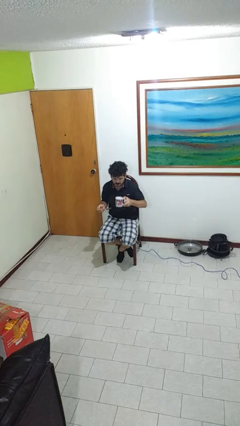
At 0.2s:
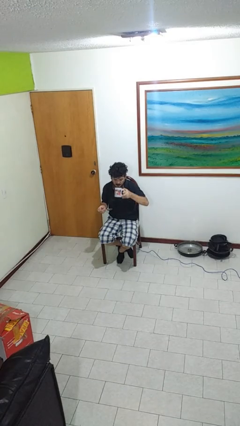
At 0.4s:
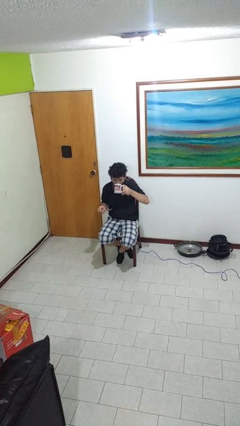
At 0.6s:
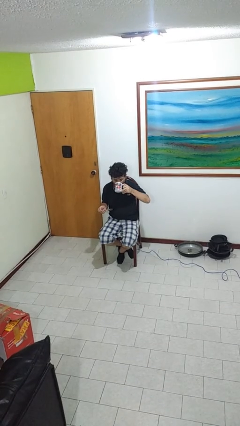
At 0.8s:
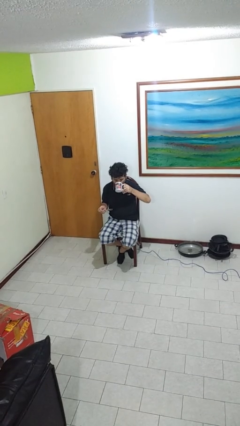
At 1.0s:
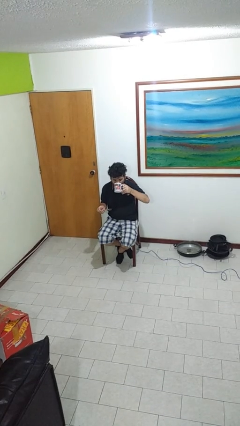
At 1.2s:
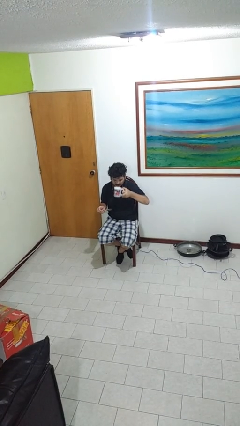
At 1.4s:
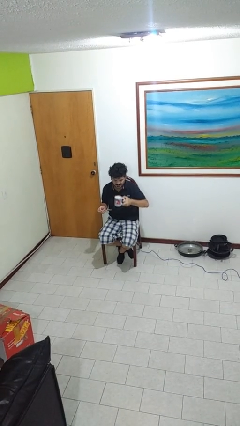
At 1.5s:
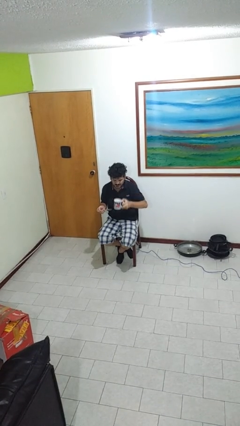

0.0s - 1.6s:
person drinks from mug

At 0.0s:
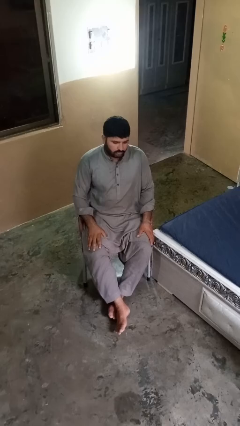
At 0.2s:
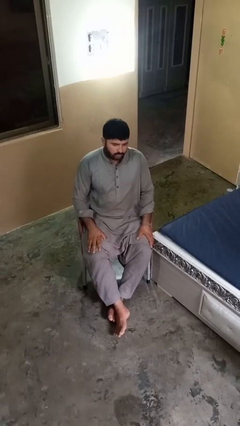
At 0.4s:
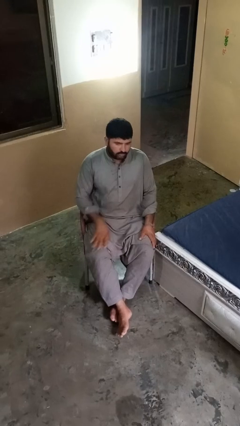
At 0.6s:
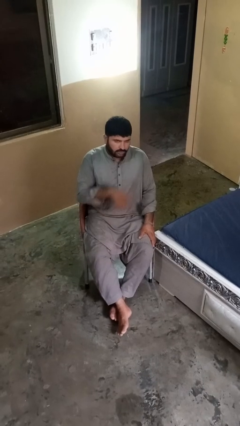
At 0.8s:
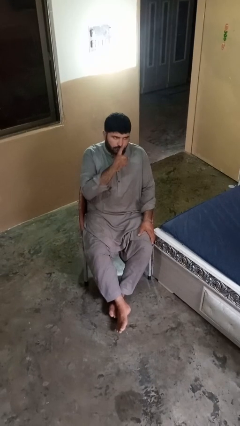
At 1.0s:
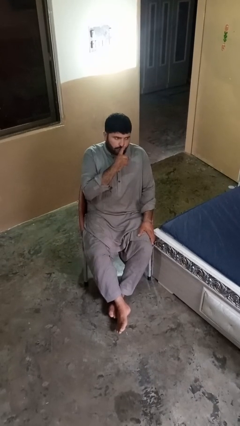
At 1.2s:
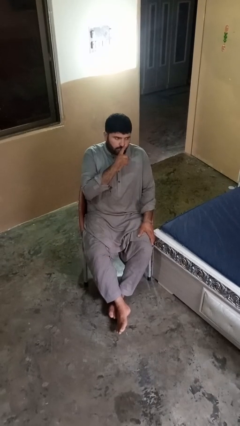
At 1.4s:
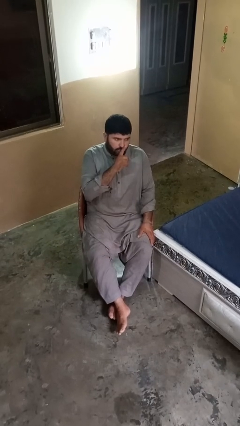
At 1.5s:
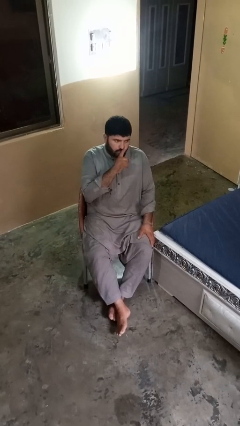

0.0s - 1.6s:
person gestures be quiet

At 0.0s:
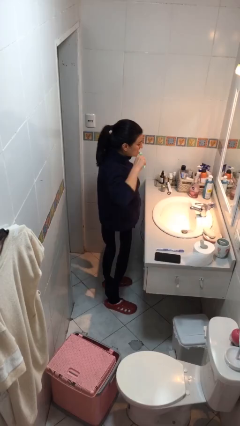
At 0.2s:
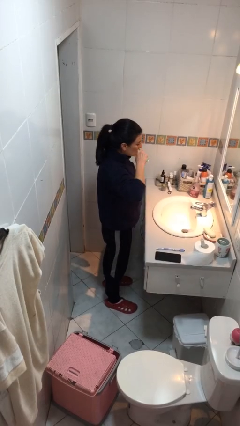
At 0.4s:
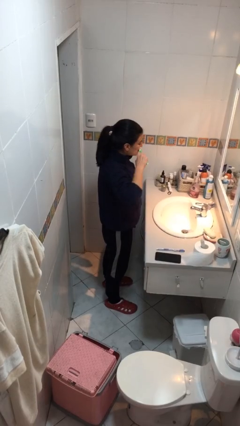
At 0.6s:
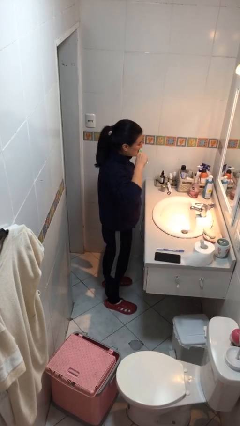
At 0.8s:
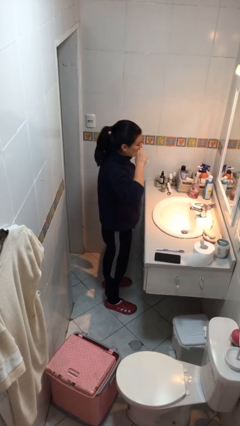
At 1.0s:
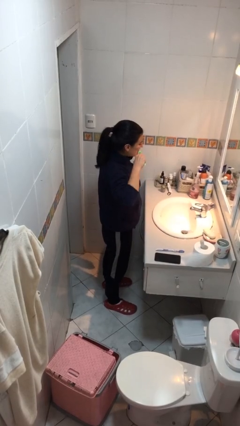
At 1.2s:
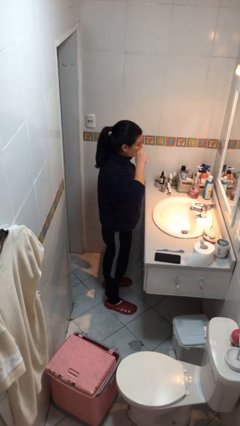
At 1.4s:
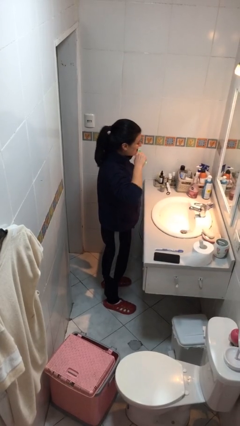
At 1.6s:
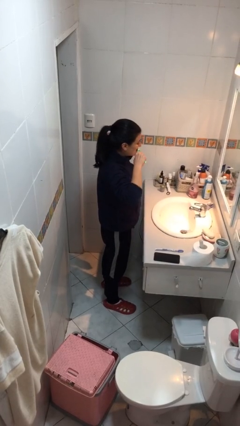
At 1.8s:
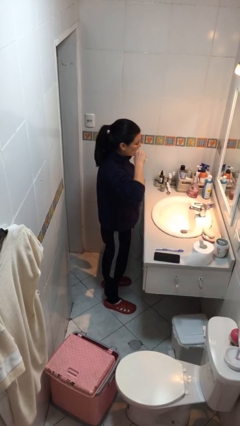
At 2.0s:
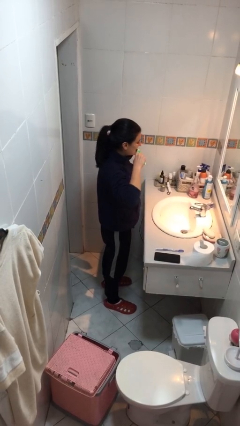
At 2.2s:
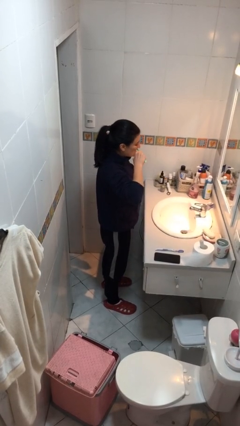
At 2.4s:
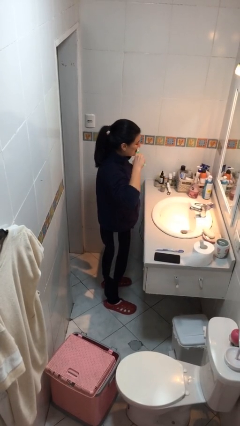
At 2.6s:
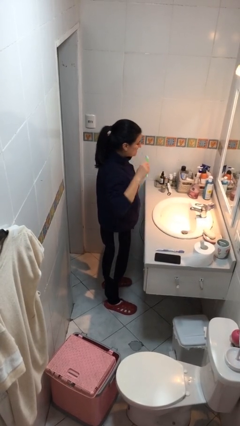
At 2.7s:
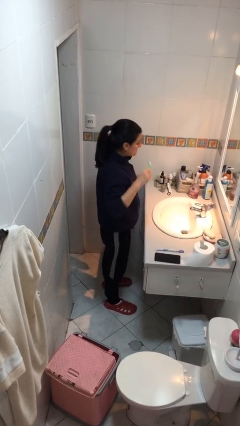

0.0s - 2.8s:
person brushes teeth

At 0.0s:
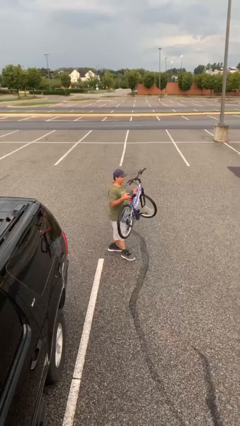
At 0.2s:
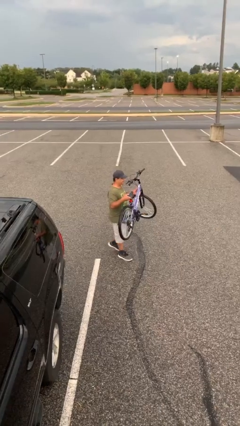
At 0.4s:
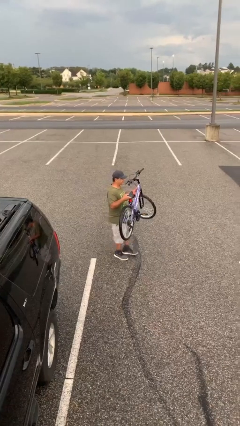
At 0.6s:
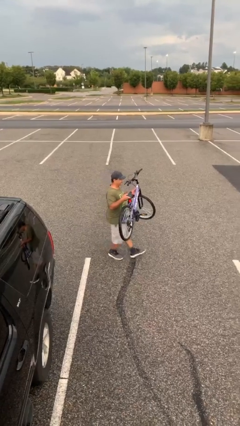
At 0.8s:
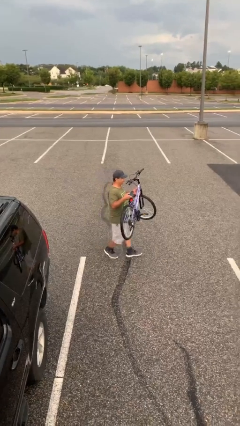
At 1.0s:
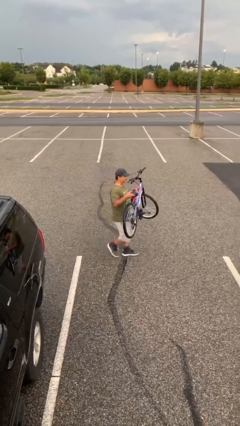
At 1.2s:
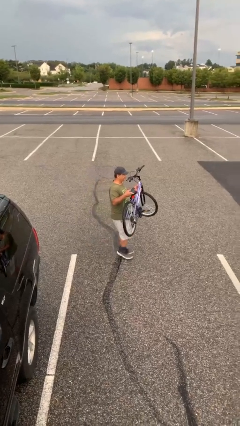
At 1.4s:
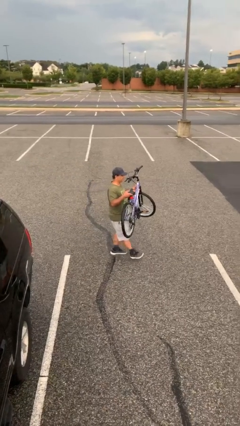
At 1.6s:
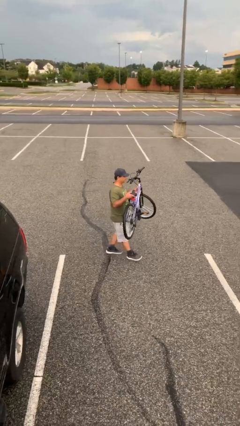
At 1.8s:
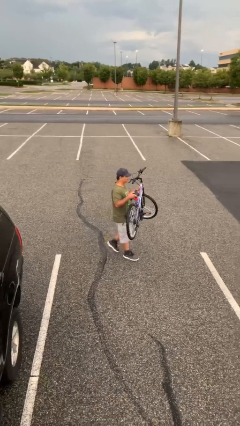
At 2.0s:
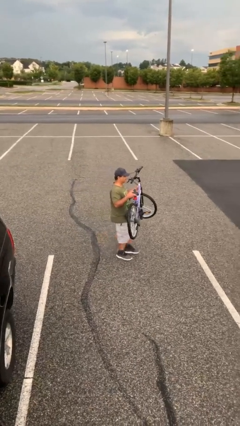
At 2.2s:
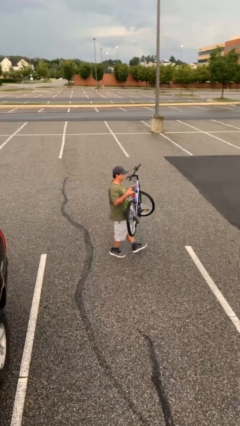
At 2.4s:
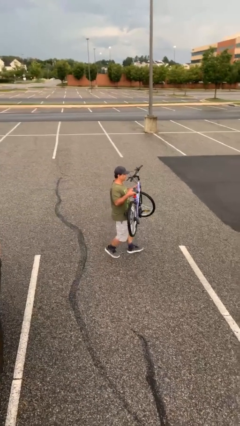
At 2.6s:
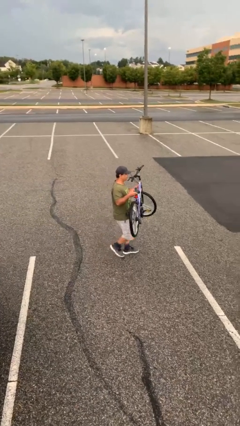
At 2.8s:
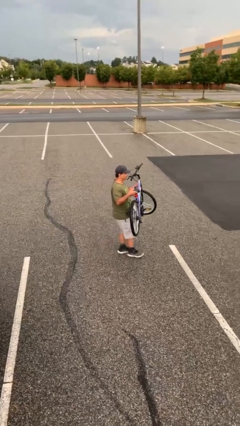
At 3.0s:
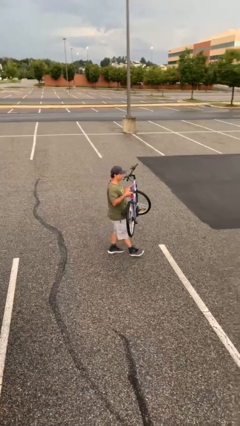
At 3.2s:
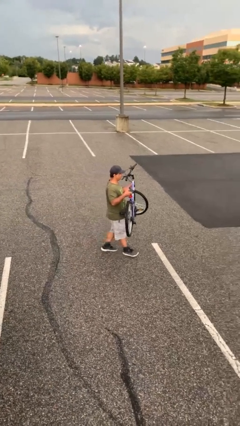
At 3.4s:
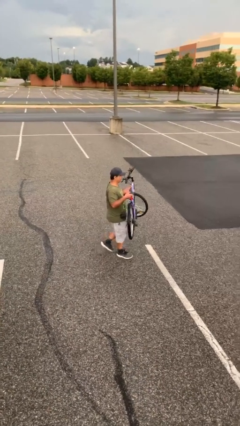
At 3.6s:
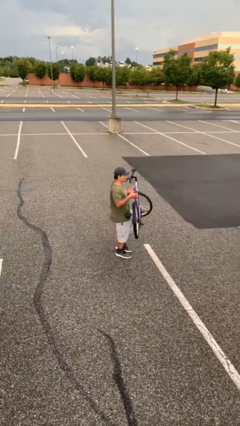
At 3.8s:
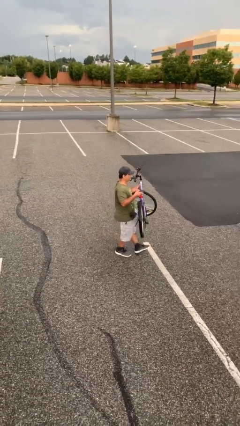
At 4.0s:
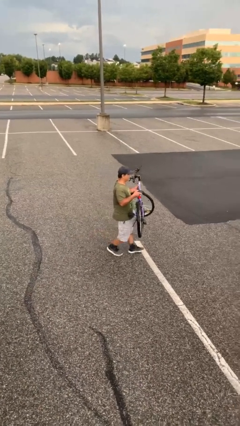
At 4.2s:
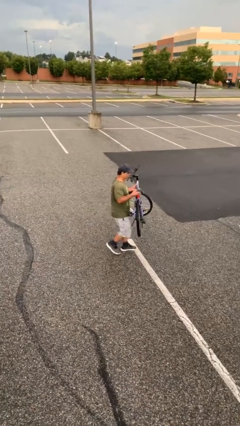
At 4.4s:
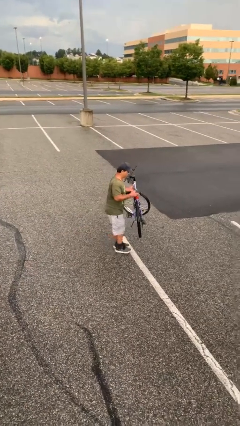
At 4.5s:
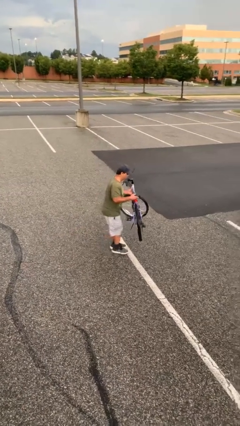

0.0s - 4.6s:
person carries heavy object

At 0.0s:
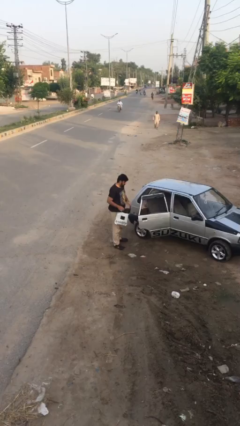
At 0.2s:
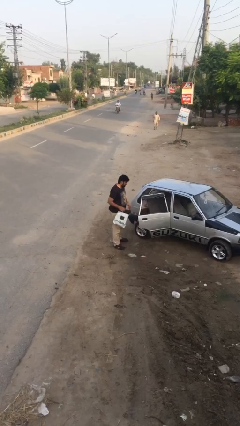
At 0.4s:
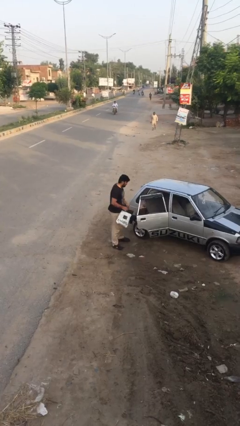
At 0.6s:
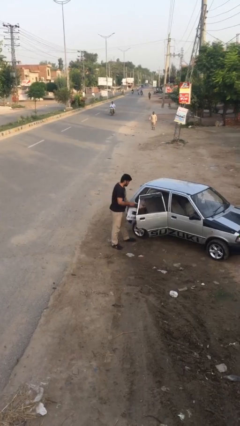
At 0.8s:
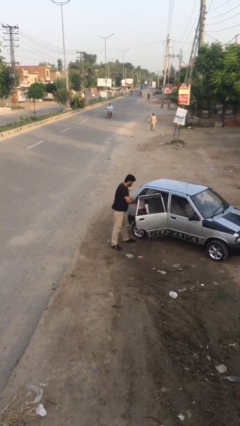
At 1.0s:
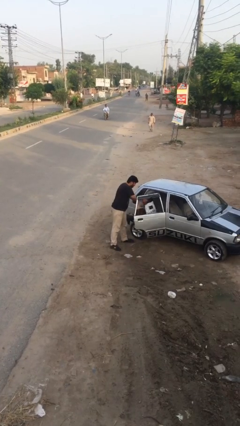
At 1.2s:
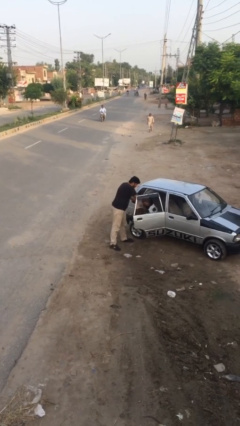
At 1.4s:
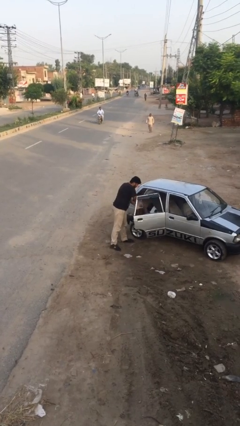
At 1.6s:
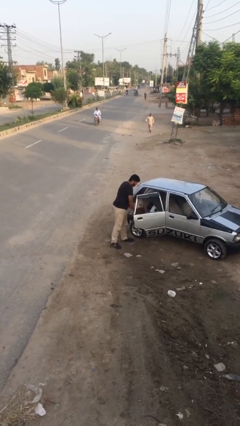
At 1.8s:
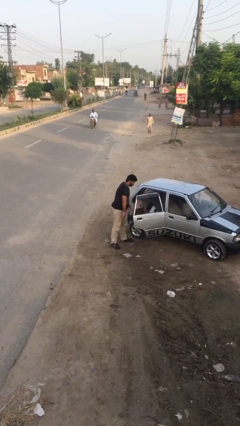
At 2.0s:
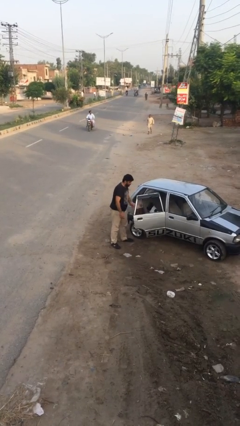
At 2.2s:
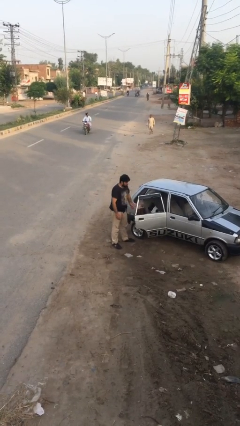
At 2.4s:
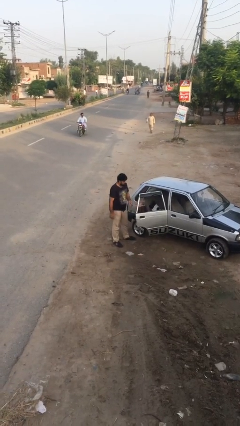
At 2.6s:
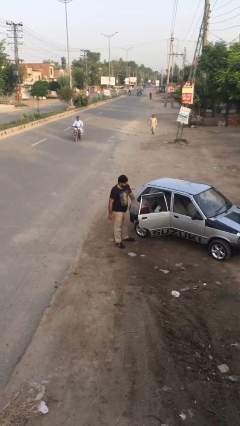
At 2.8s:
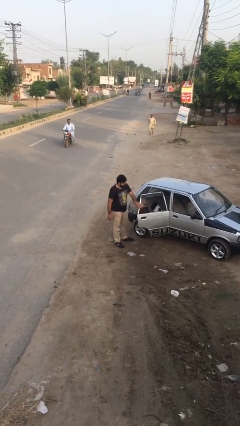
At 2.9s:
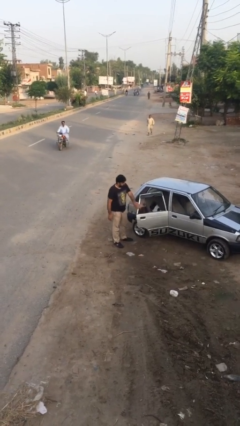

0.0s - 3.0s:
person loads car

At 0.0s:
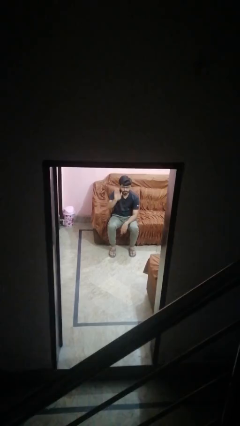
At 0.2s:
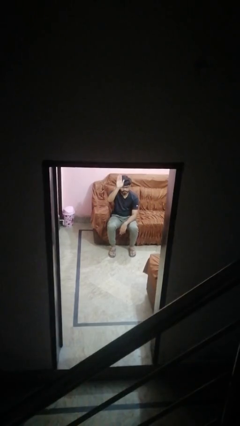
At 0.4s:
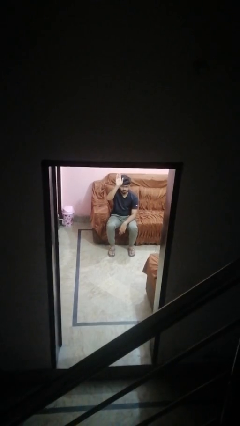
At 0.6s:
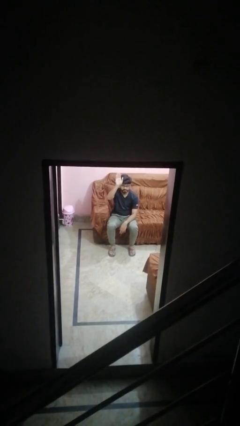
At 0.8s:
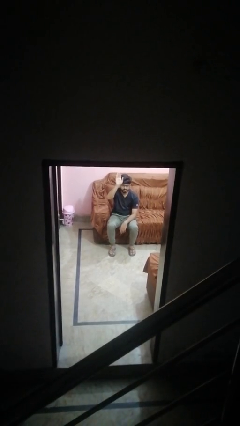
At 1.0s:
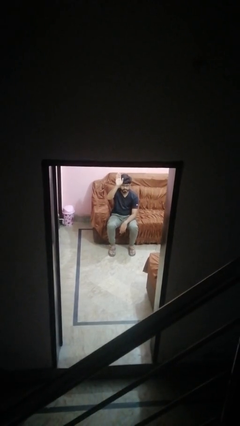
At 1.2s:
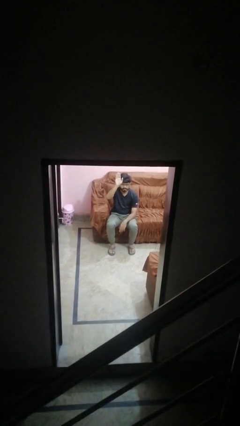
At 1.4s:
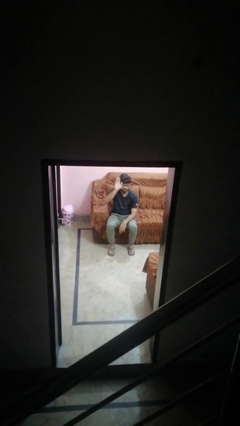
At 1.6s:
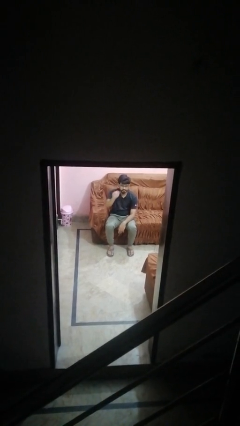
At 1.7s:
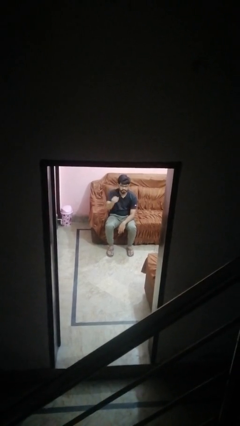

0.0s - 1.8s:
person gestures raise hand

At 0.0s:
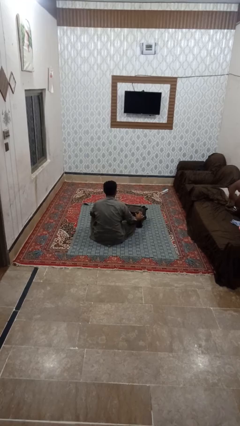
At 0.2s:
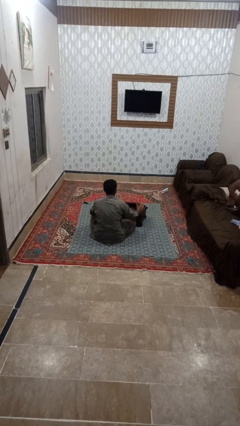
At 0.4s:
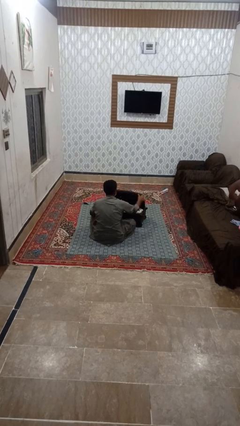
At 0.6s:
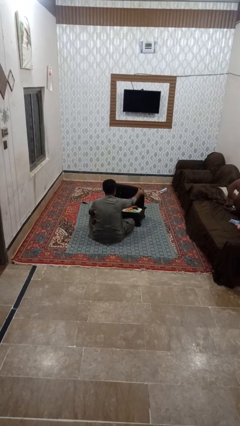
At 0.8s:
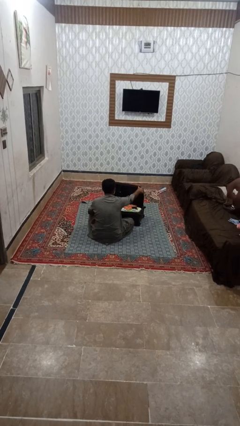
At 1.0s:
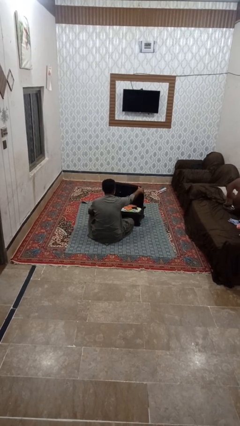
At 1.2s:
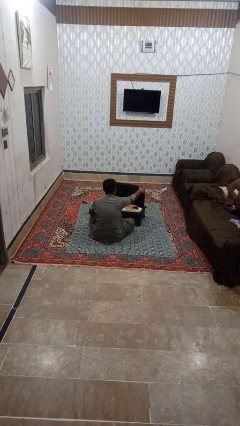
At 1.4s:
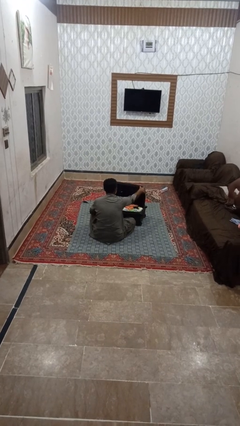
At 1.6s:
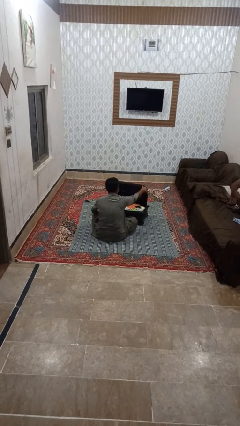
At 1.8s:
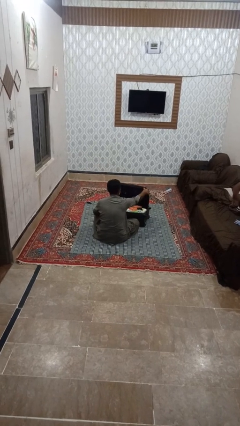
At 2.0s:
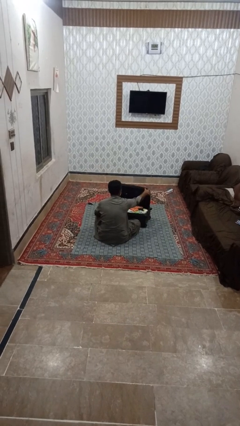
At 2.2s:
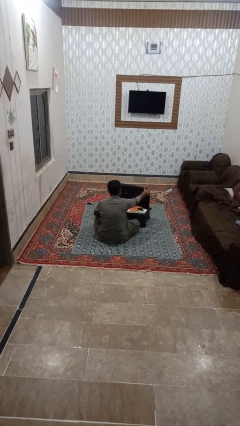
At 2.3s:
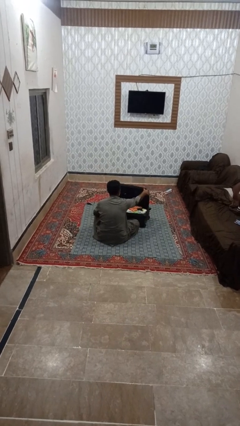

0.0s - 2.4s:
person opens suitcase
